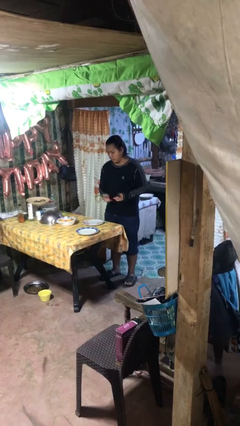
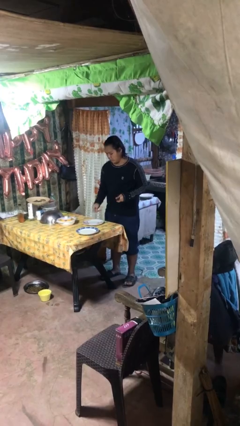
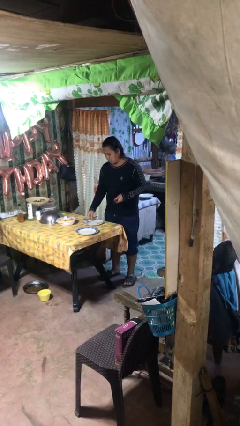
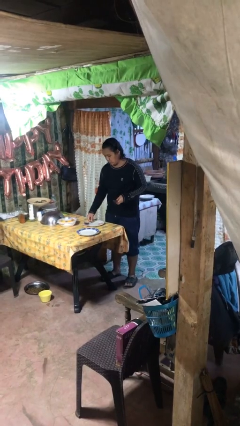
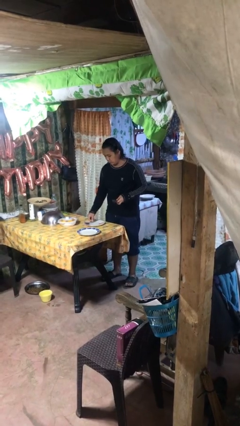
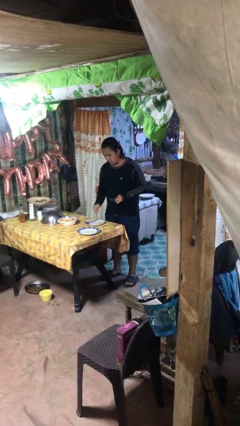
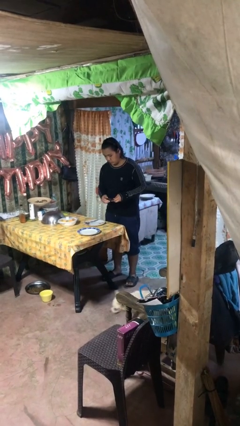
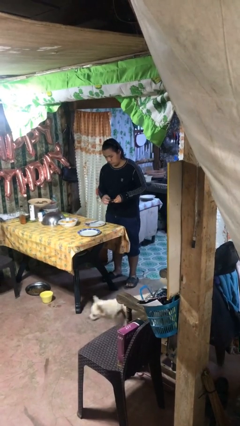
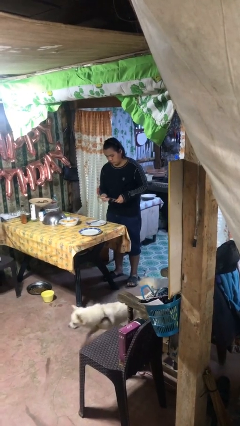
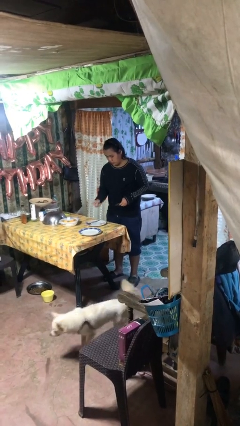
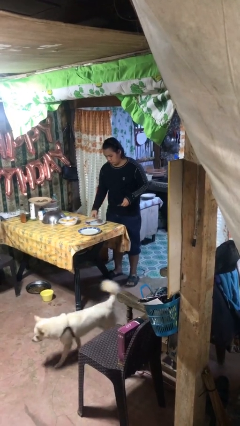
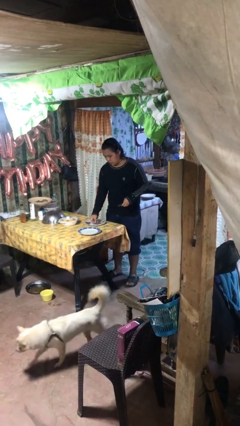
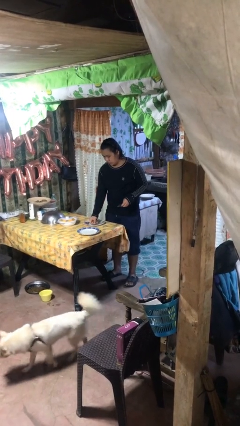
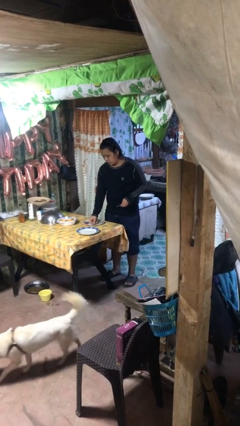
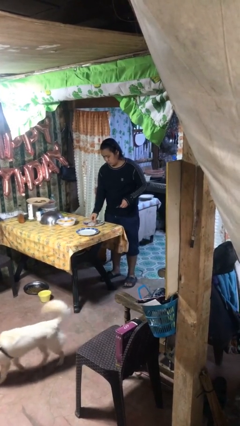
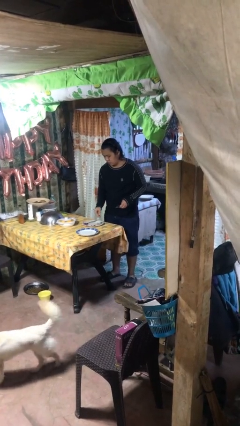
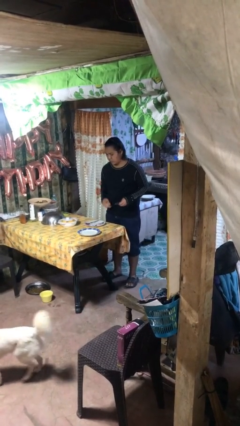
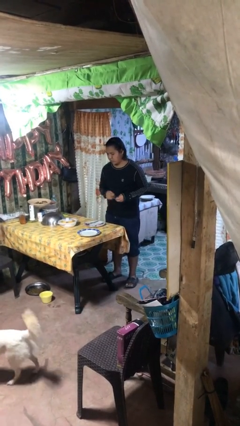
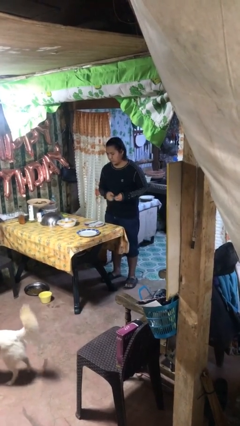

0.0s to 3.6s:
person sets table

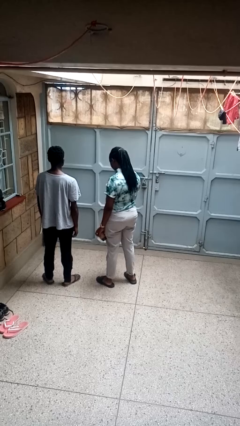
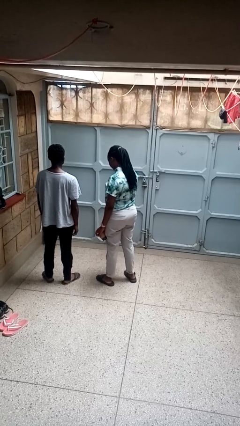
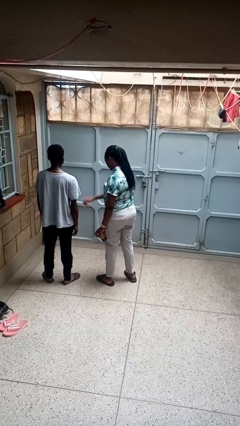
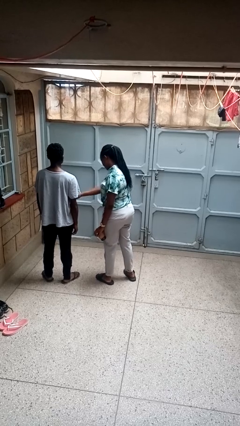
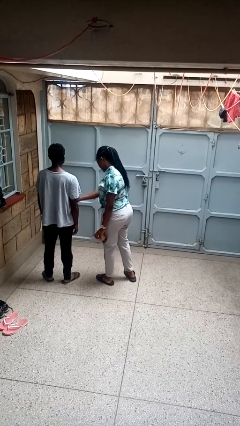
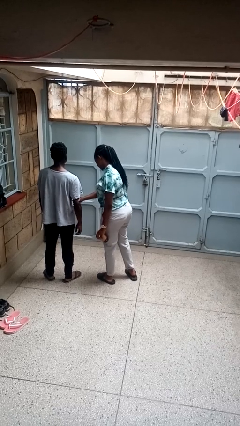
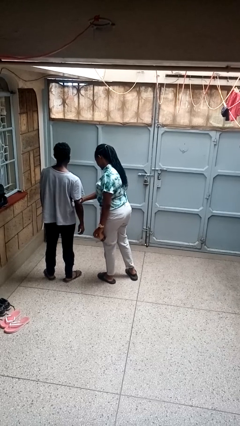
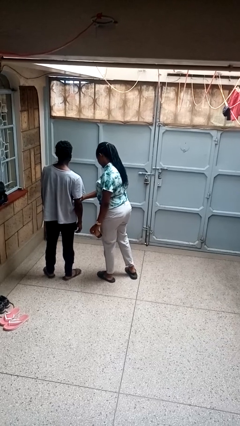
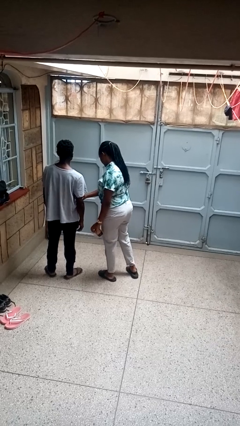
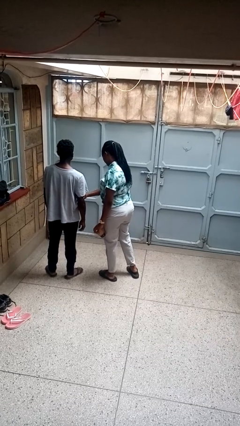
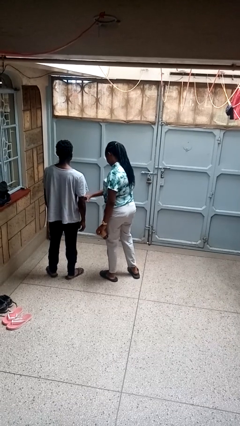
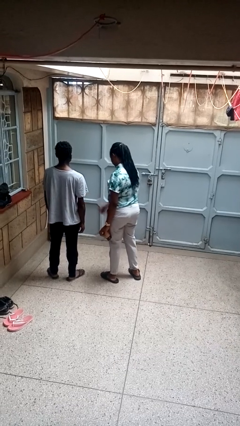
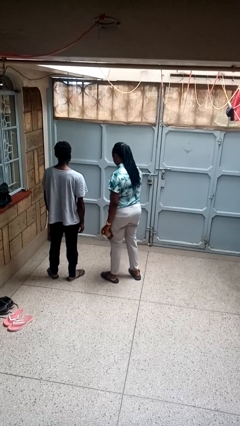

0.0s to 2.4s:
person grabs person by bicep

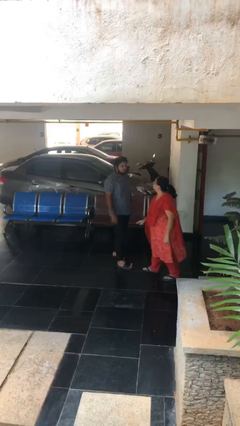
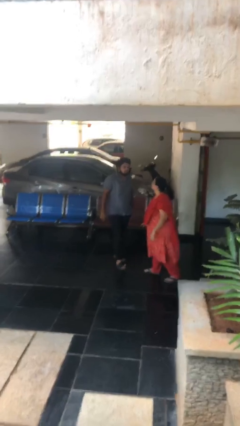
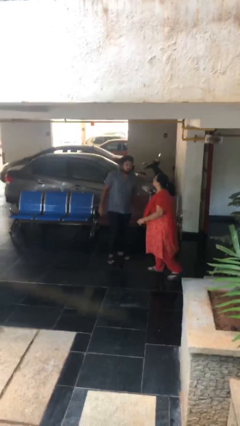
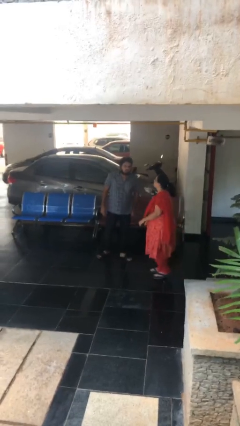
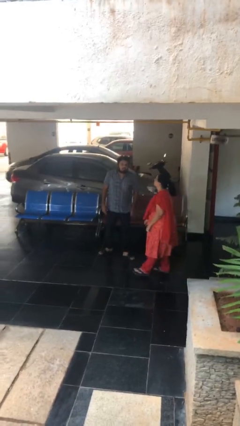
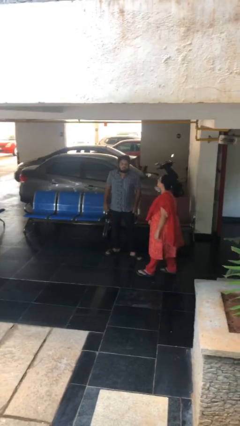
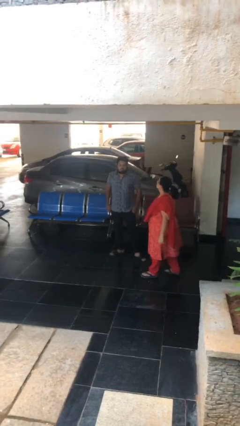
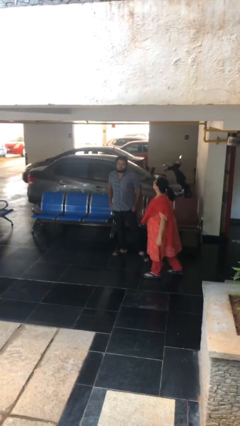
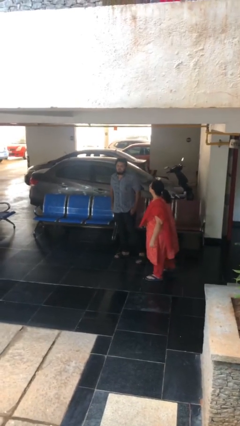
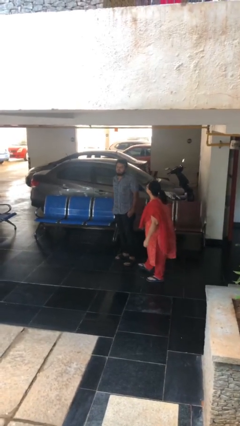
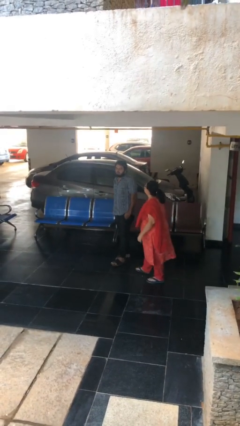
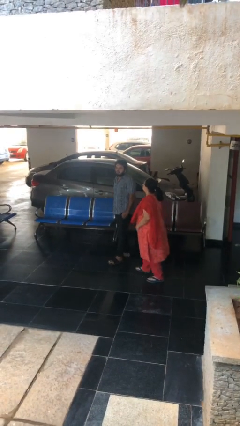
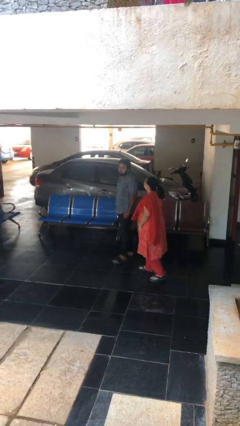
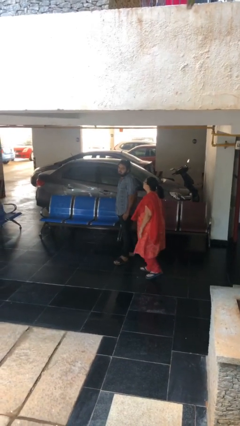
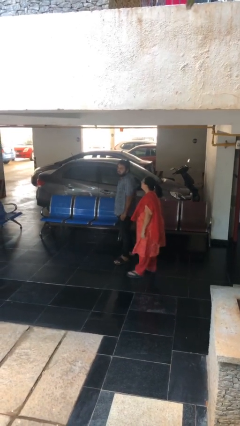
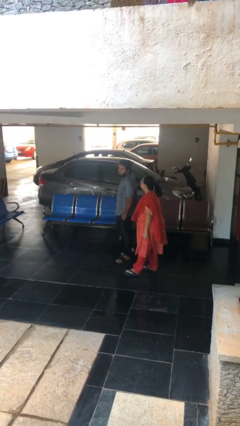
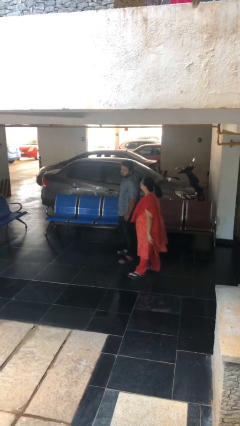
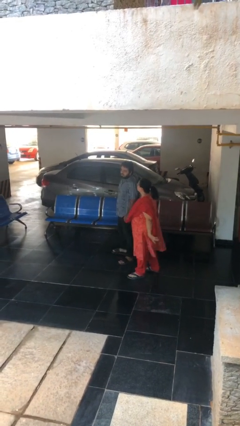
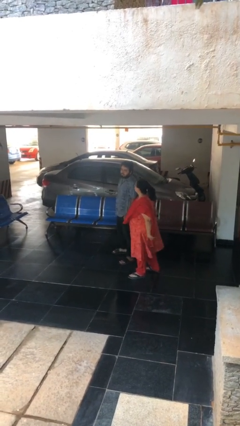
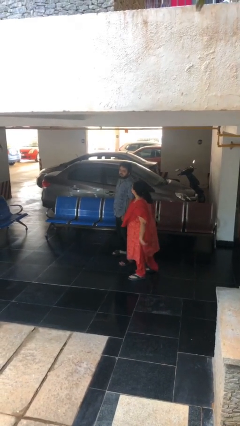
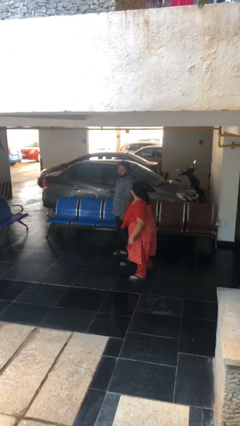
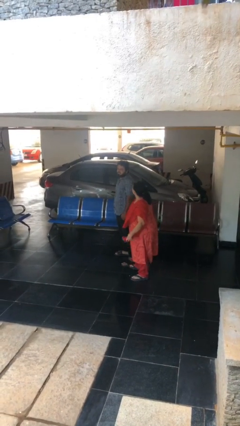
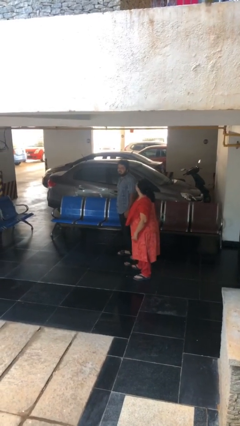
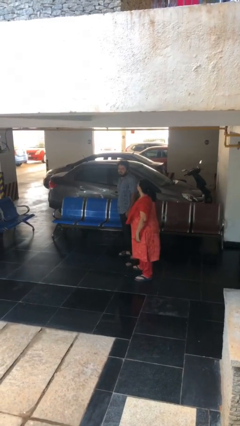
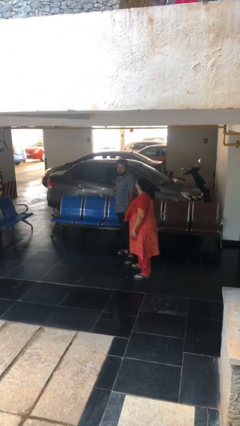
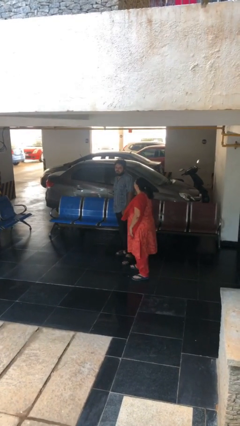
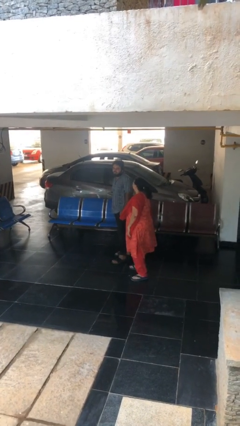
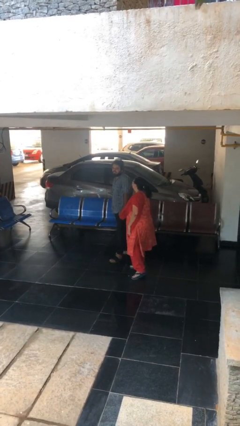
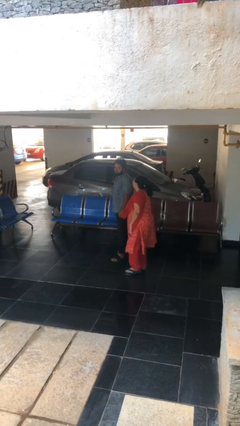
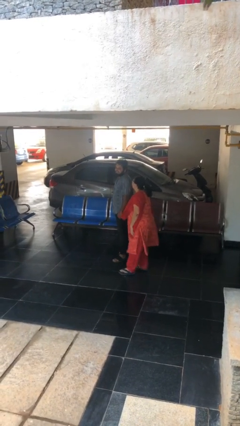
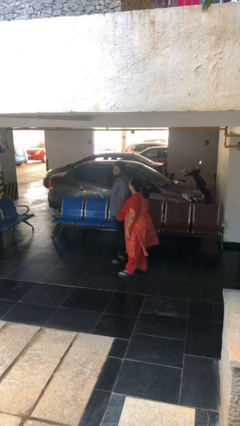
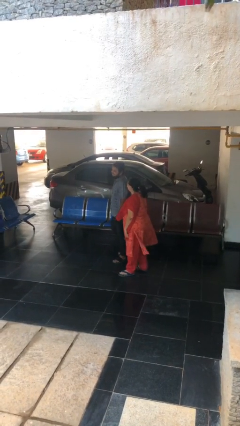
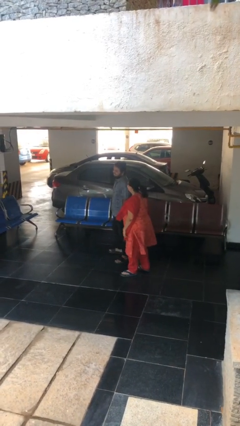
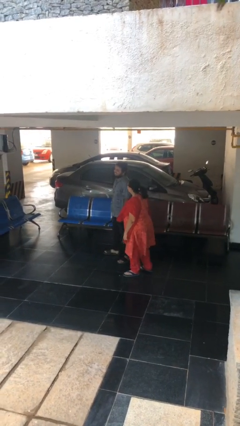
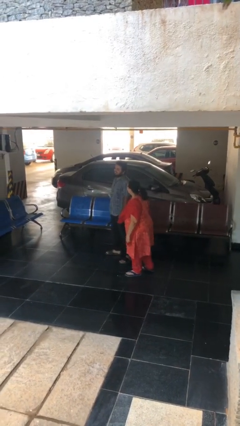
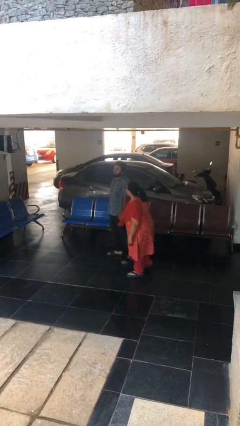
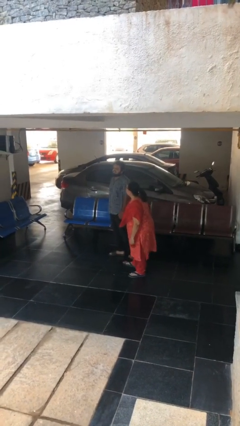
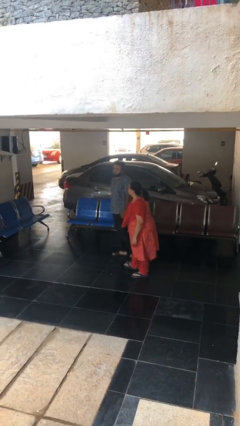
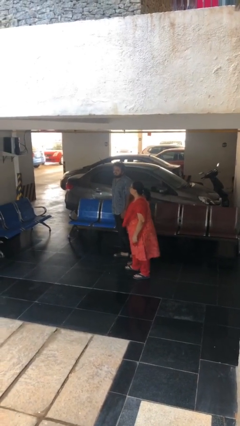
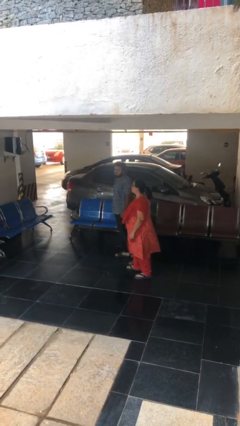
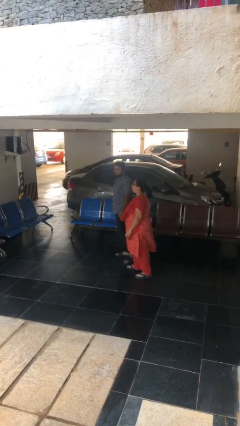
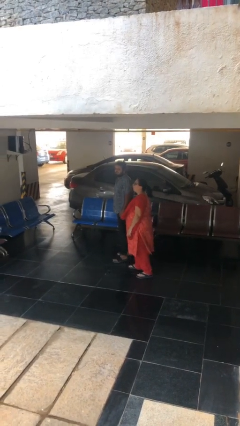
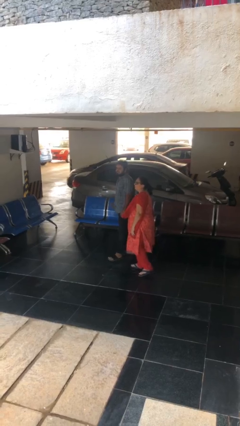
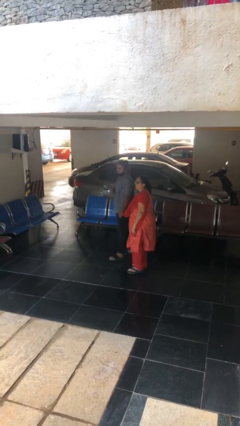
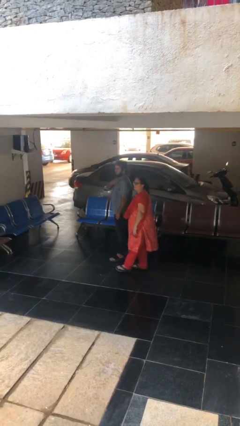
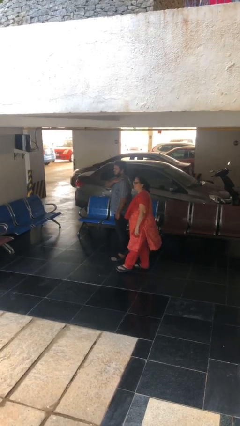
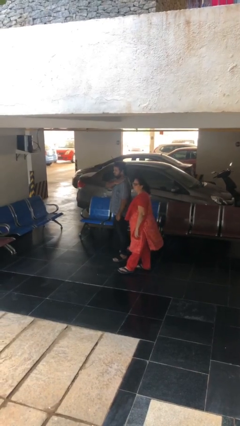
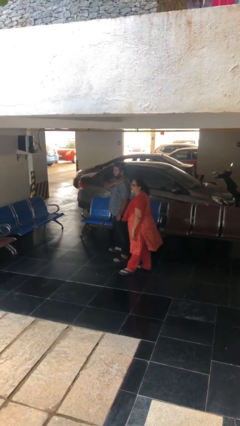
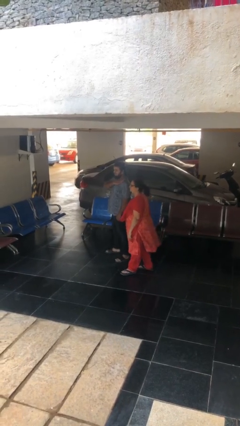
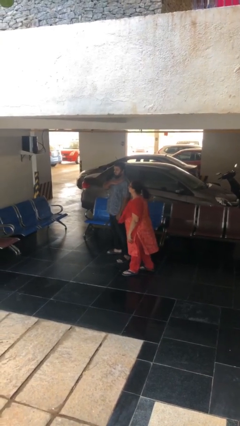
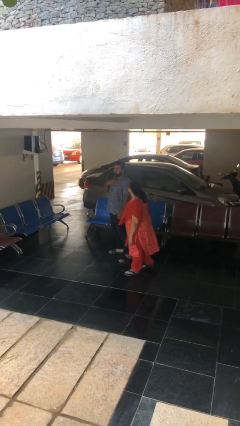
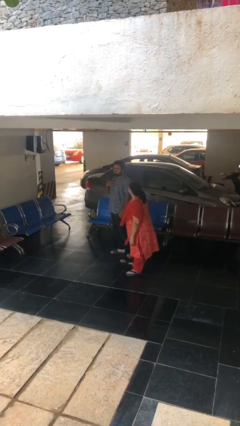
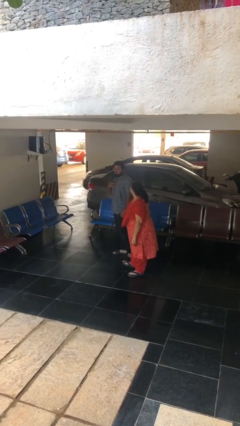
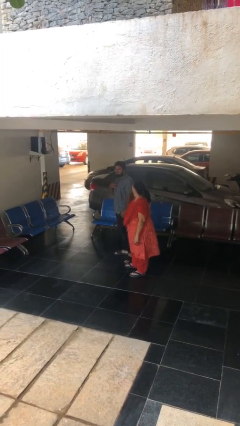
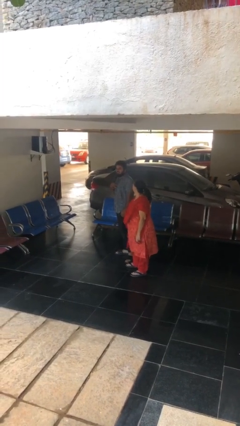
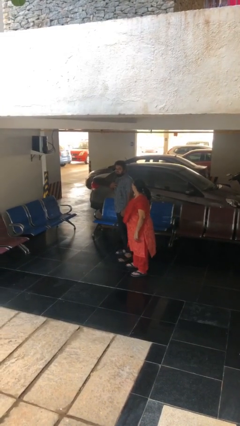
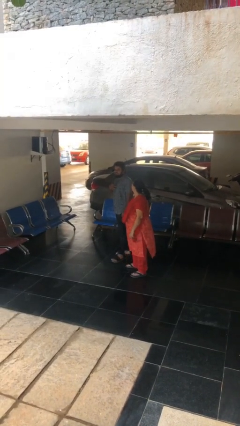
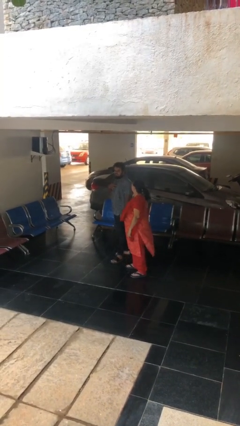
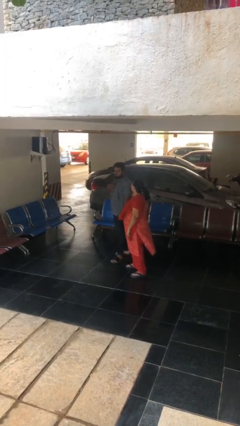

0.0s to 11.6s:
person talks to person

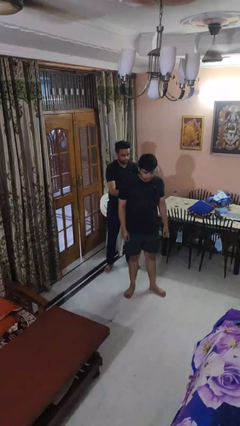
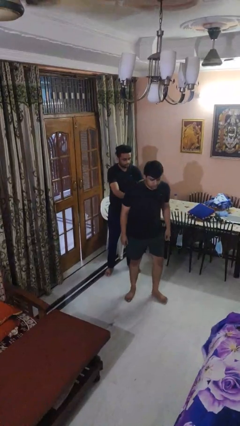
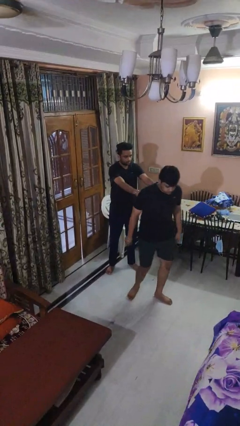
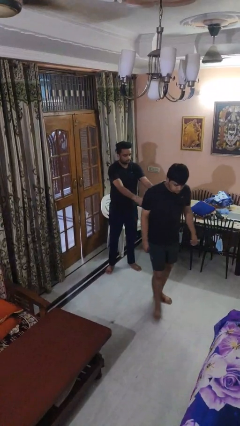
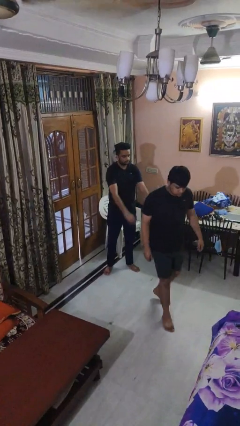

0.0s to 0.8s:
person shoves person
